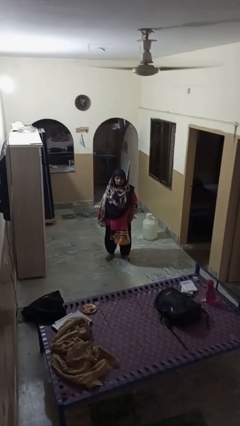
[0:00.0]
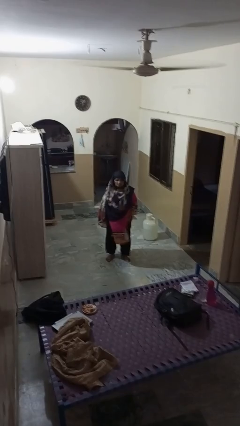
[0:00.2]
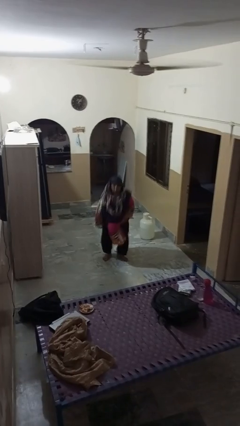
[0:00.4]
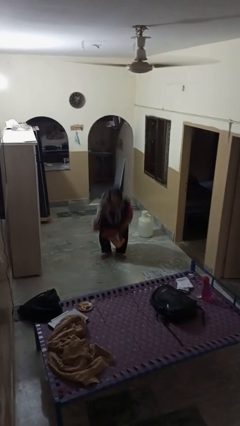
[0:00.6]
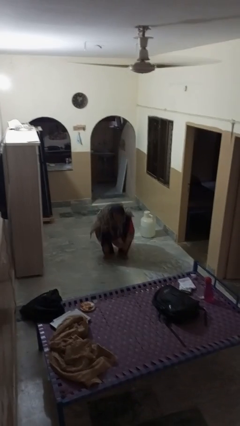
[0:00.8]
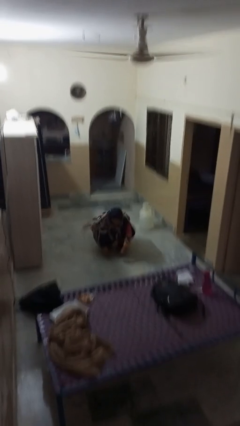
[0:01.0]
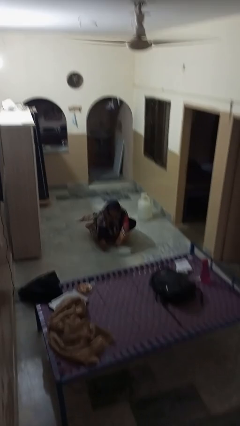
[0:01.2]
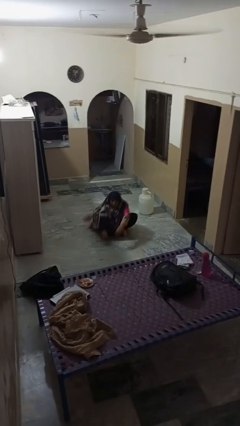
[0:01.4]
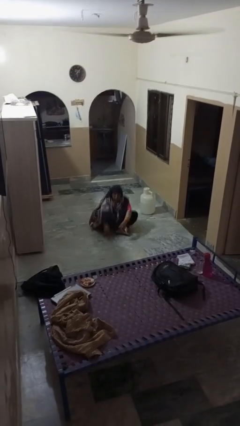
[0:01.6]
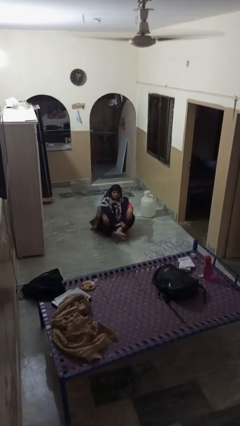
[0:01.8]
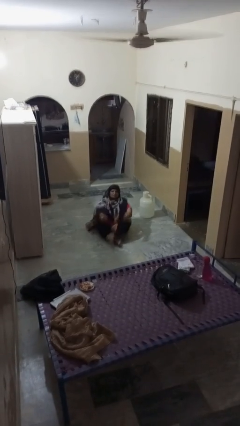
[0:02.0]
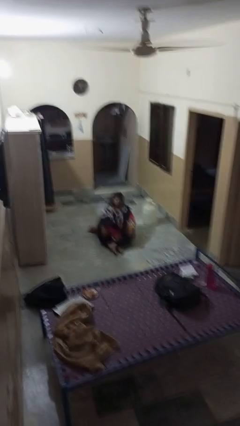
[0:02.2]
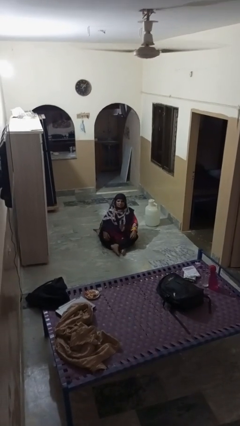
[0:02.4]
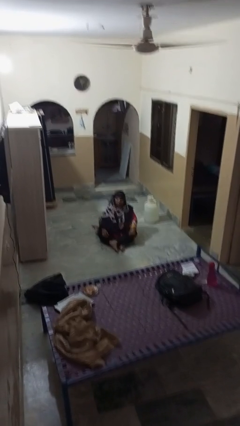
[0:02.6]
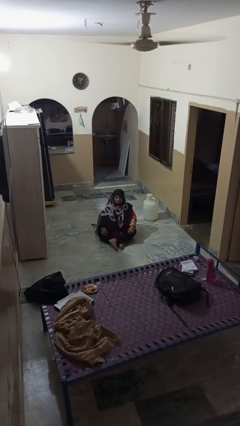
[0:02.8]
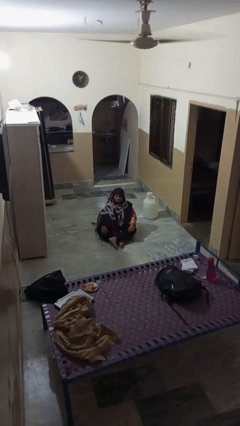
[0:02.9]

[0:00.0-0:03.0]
person sits crisscross

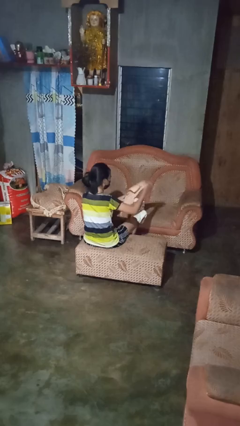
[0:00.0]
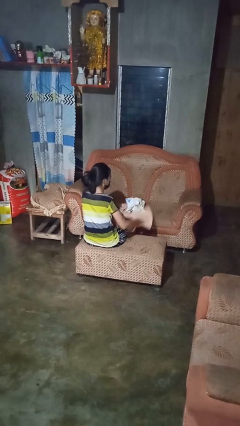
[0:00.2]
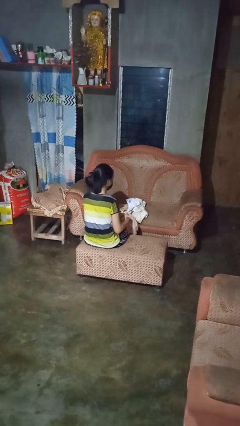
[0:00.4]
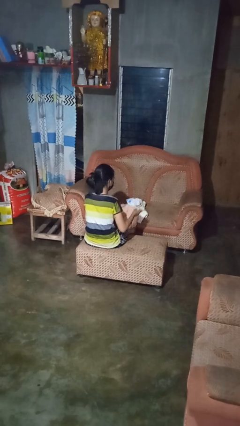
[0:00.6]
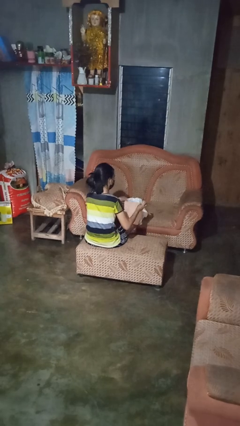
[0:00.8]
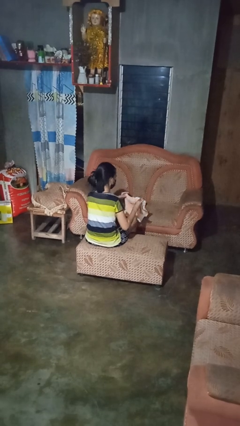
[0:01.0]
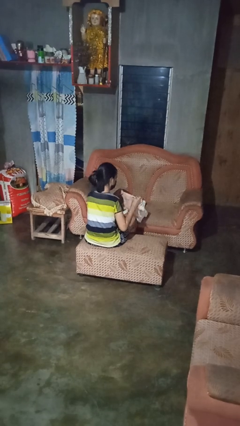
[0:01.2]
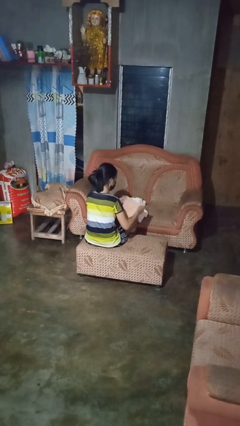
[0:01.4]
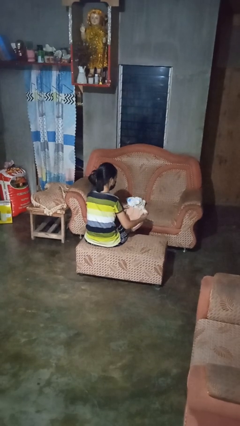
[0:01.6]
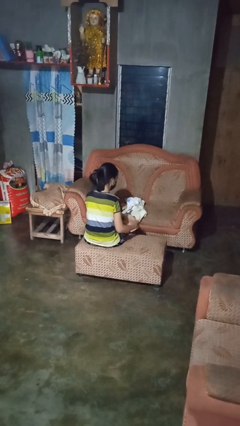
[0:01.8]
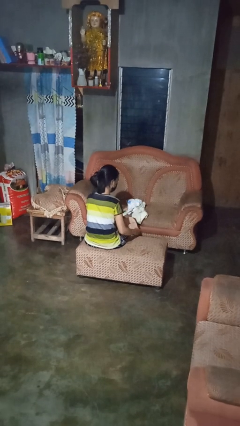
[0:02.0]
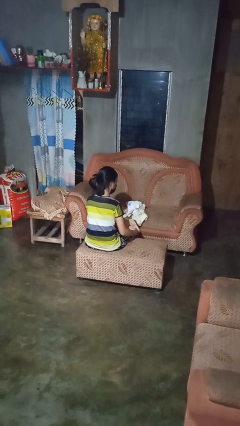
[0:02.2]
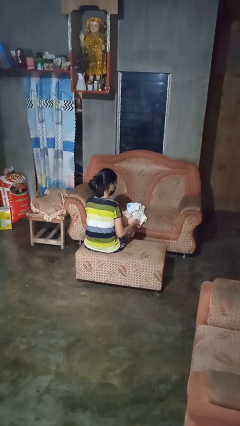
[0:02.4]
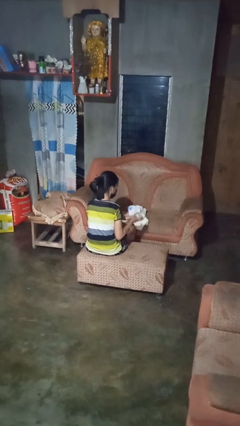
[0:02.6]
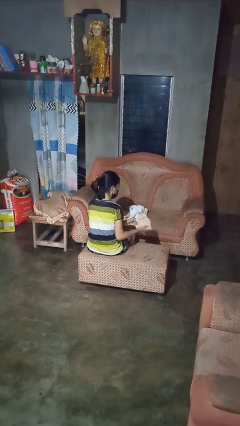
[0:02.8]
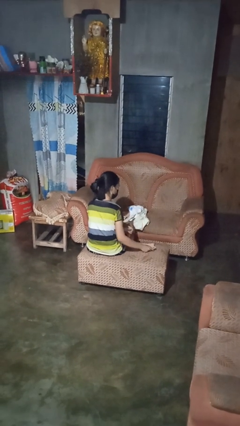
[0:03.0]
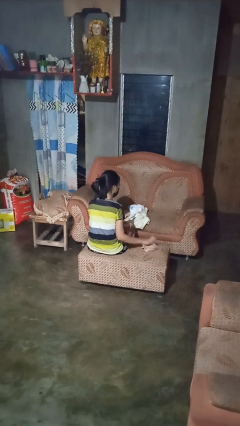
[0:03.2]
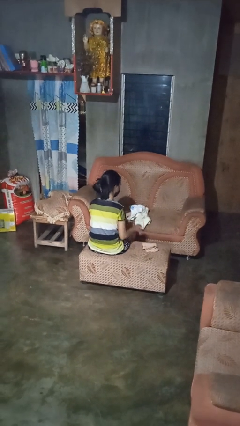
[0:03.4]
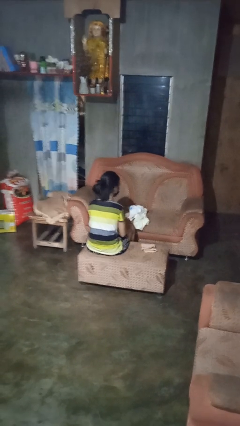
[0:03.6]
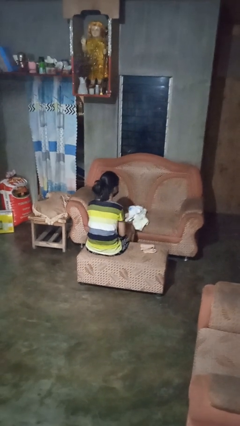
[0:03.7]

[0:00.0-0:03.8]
person folds towel

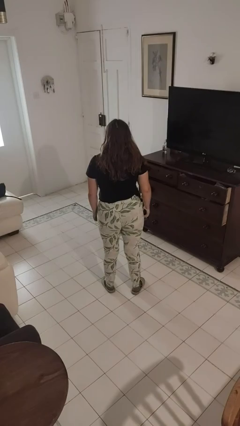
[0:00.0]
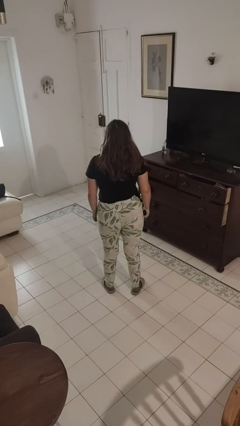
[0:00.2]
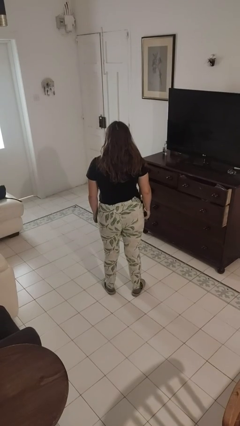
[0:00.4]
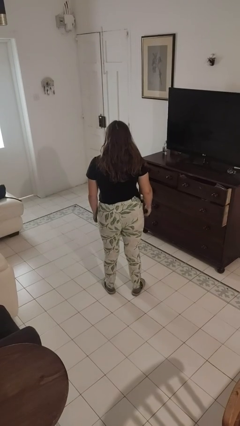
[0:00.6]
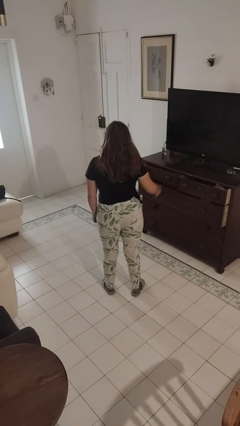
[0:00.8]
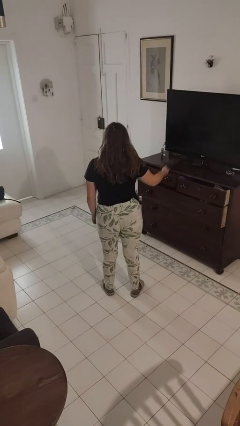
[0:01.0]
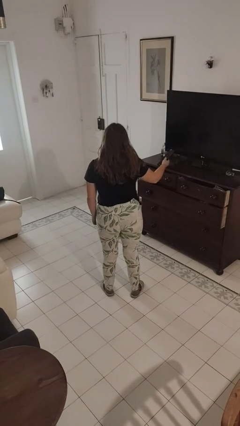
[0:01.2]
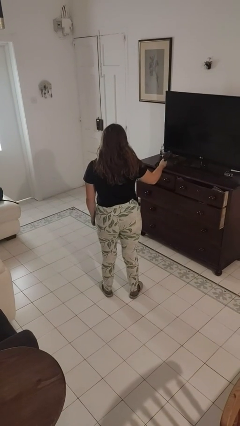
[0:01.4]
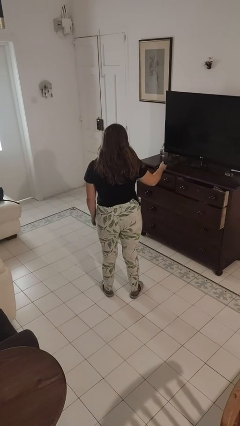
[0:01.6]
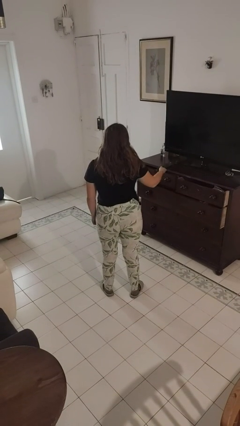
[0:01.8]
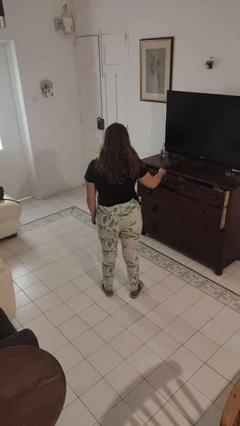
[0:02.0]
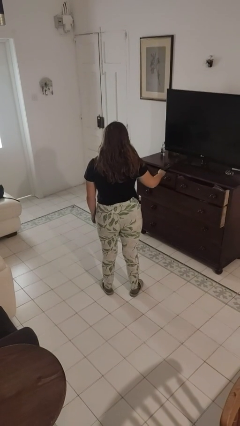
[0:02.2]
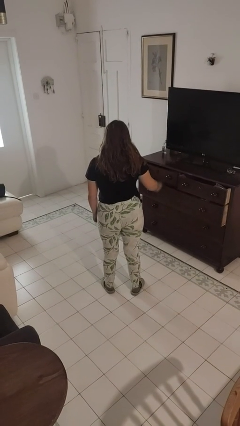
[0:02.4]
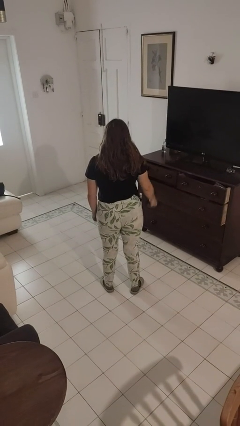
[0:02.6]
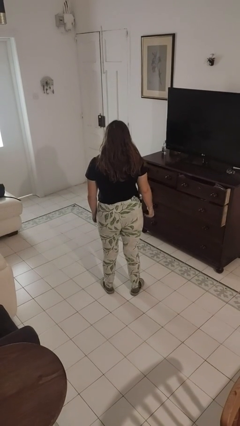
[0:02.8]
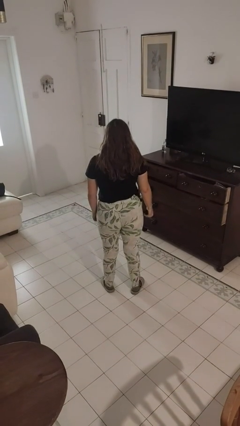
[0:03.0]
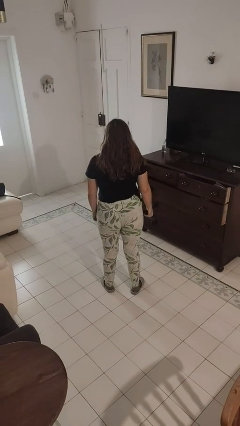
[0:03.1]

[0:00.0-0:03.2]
person uses television remote

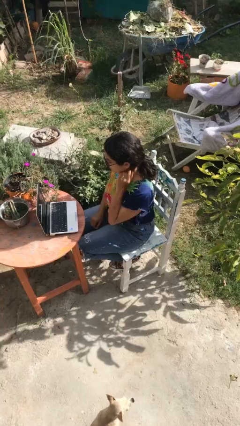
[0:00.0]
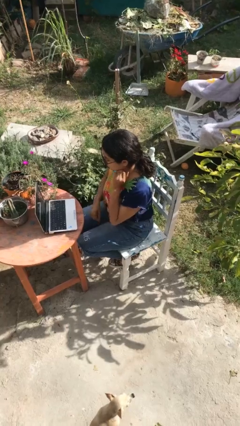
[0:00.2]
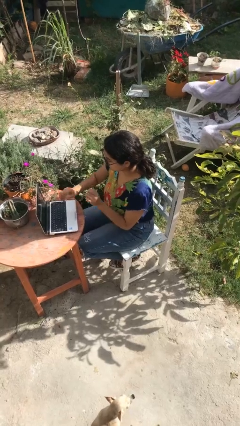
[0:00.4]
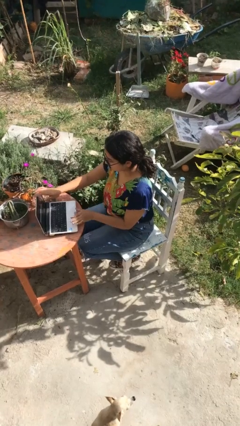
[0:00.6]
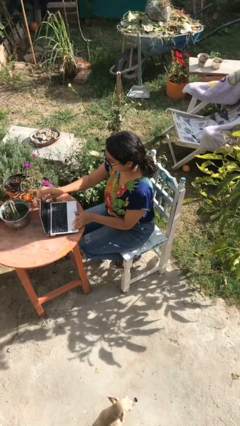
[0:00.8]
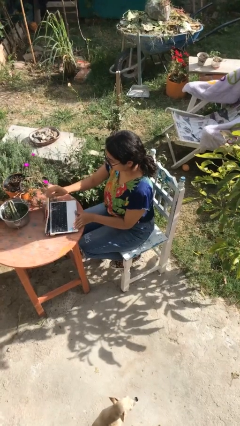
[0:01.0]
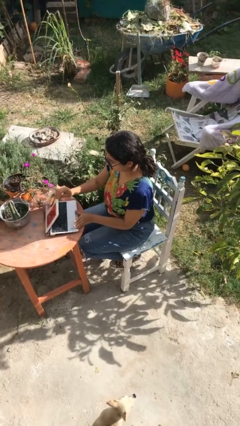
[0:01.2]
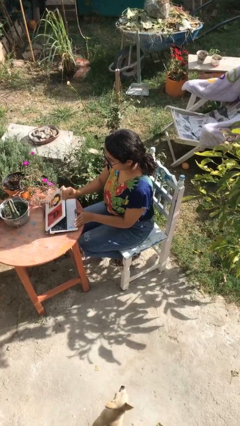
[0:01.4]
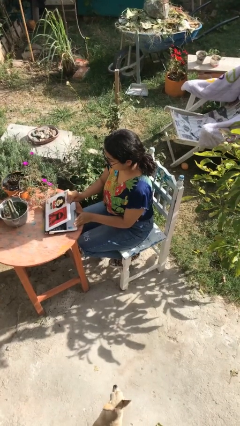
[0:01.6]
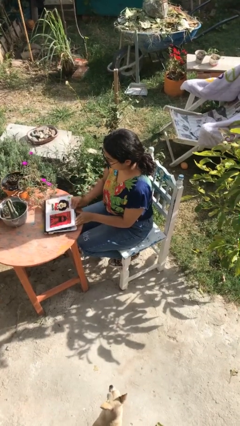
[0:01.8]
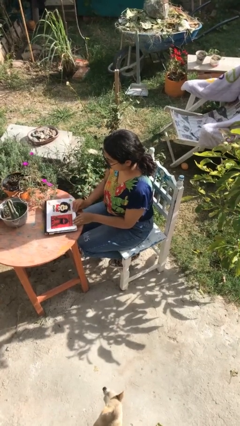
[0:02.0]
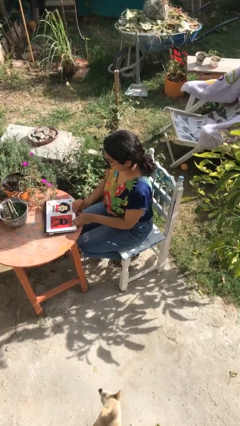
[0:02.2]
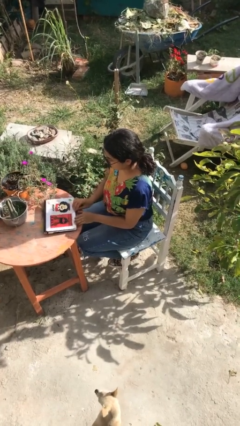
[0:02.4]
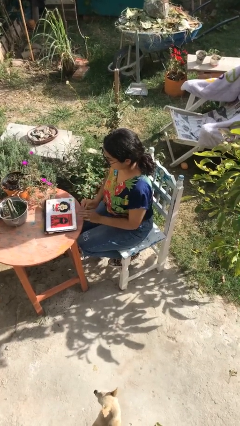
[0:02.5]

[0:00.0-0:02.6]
person closes laptop

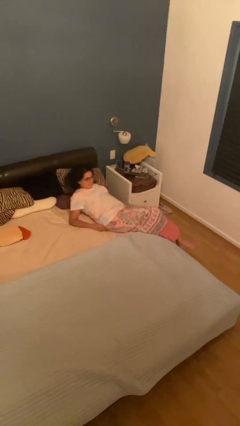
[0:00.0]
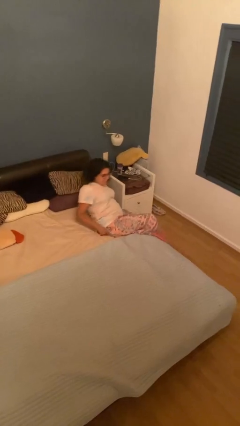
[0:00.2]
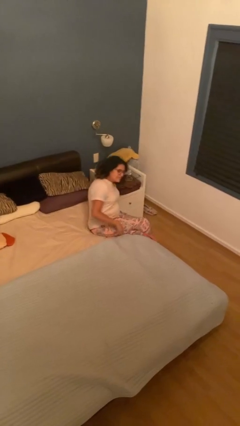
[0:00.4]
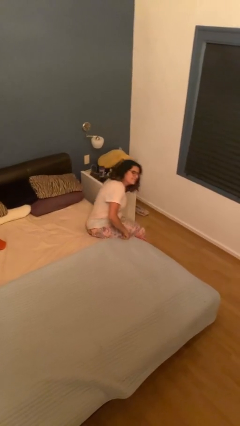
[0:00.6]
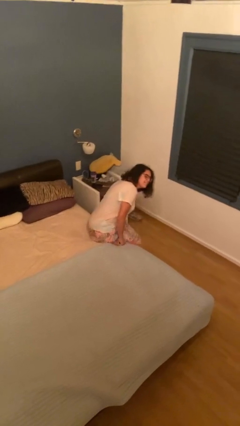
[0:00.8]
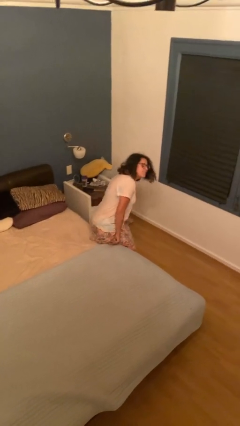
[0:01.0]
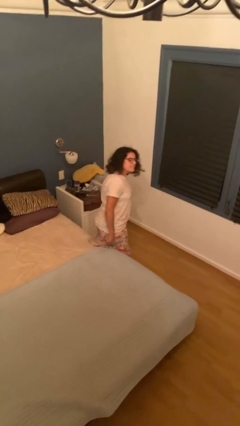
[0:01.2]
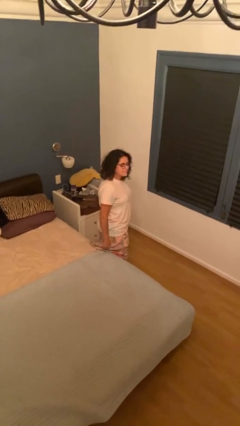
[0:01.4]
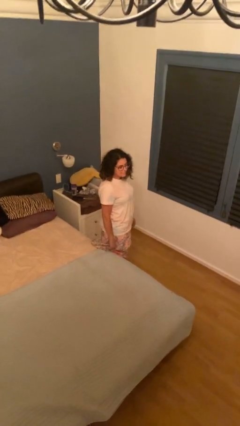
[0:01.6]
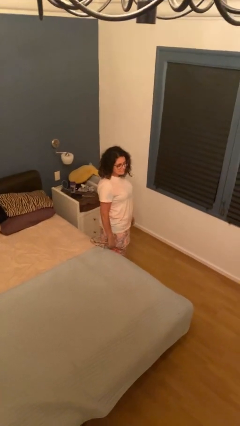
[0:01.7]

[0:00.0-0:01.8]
person stands up

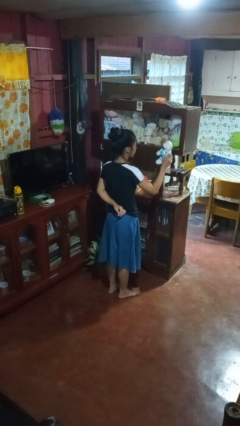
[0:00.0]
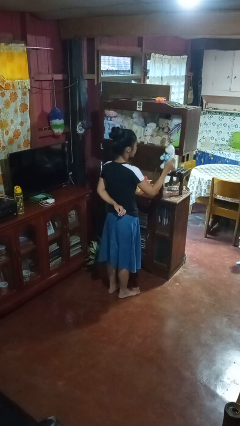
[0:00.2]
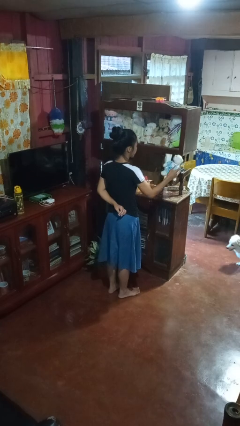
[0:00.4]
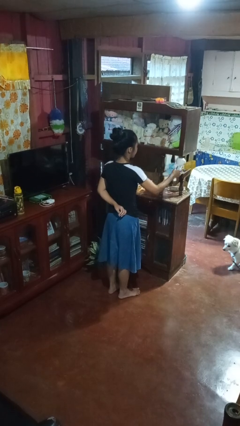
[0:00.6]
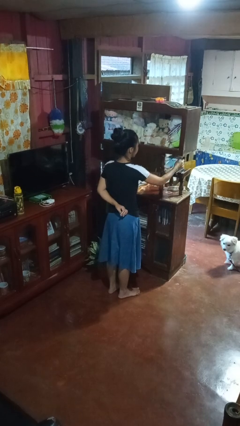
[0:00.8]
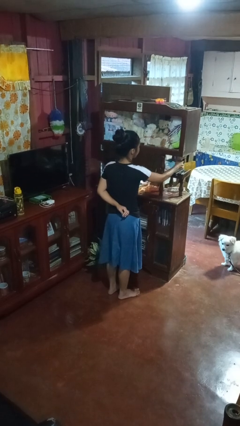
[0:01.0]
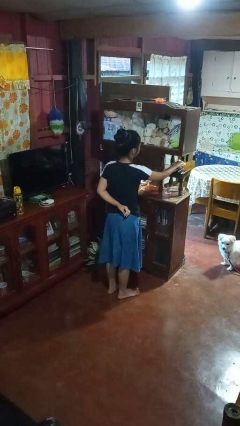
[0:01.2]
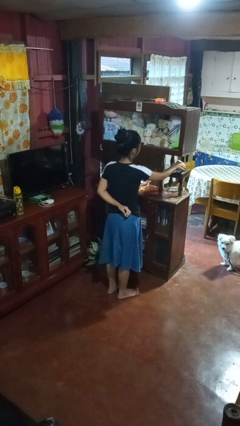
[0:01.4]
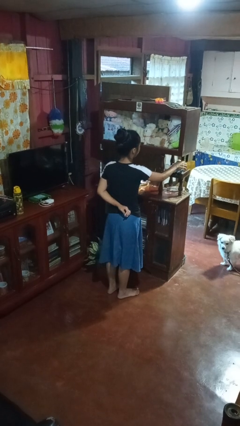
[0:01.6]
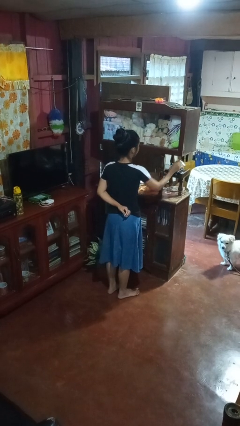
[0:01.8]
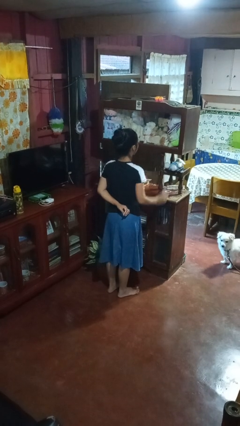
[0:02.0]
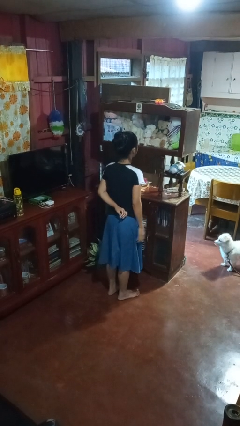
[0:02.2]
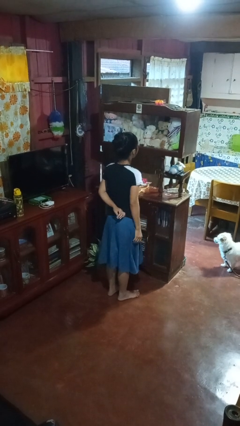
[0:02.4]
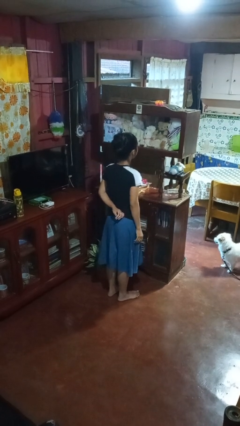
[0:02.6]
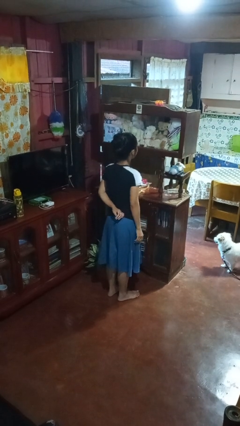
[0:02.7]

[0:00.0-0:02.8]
person puts down object on shelf

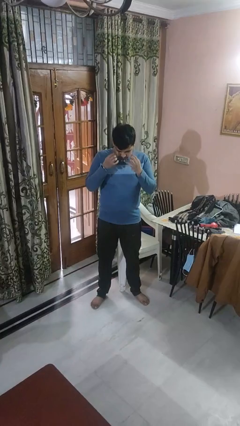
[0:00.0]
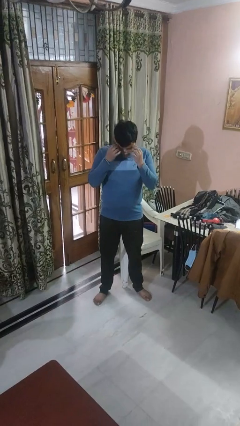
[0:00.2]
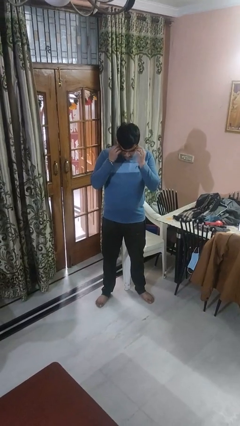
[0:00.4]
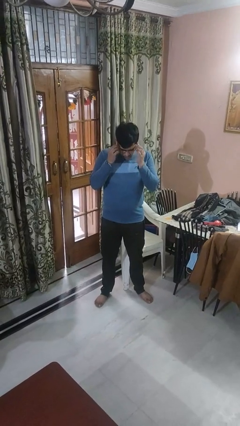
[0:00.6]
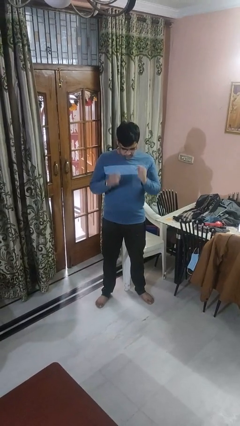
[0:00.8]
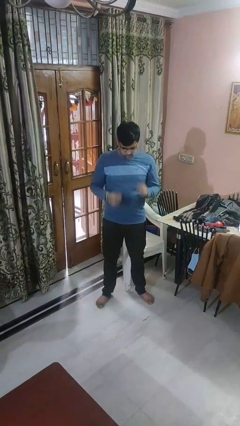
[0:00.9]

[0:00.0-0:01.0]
person puts on glasses
